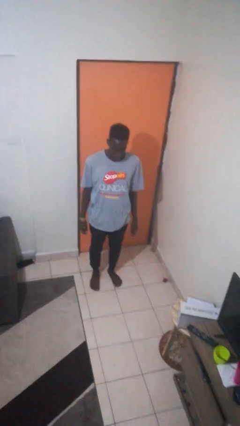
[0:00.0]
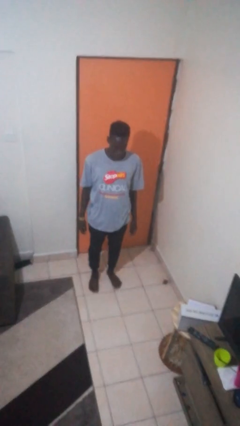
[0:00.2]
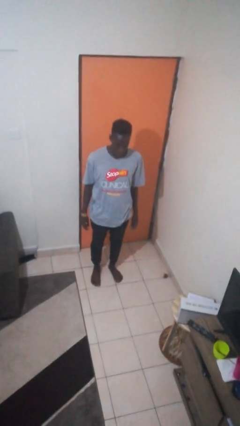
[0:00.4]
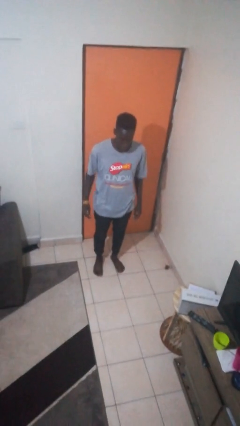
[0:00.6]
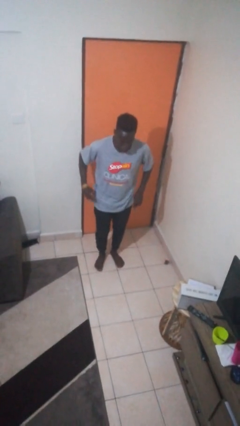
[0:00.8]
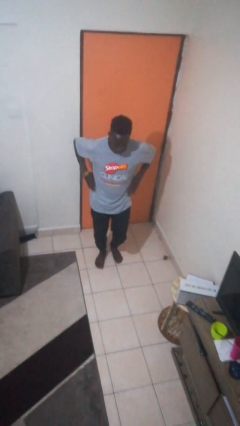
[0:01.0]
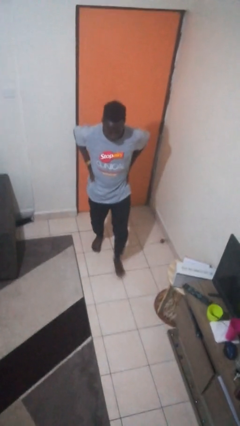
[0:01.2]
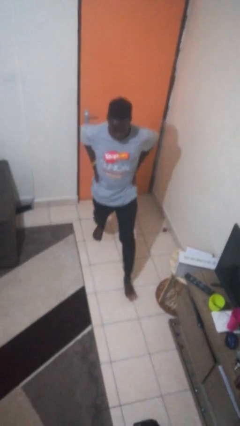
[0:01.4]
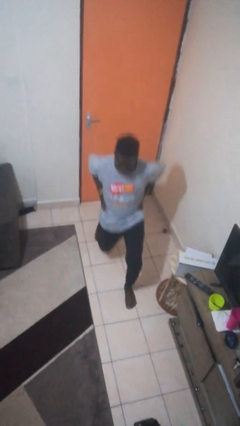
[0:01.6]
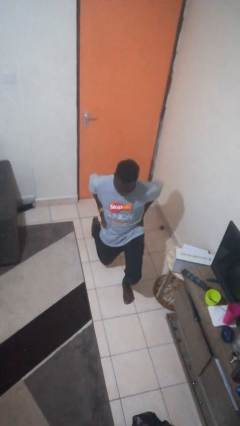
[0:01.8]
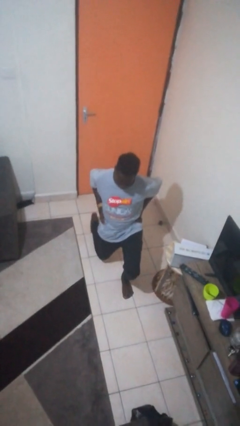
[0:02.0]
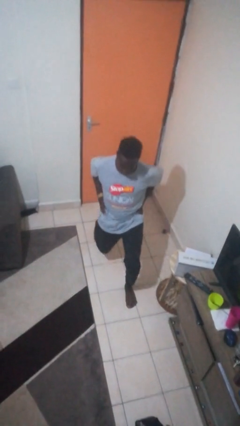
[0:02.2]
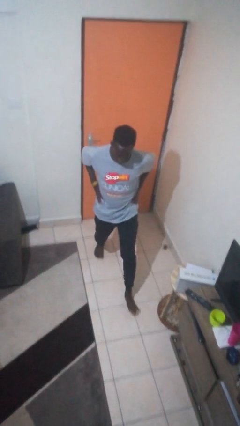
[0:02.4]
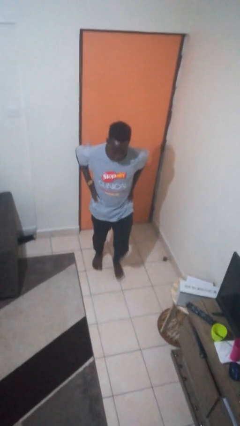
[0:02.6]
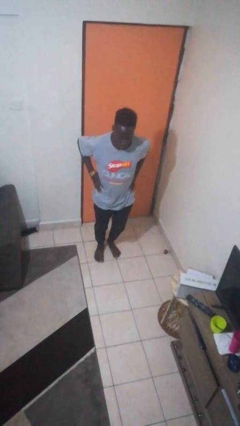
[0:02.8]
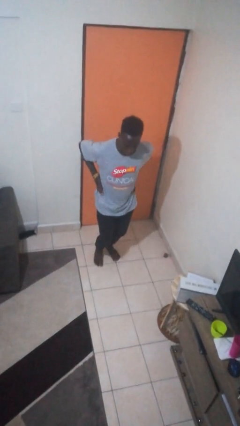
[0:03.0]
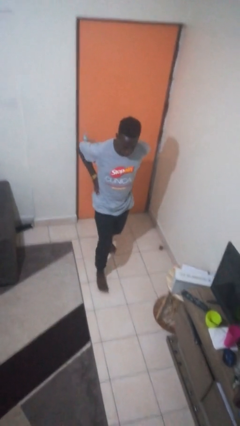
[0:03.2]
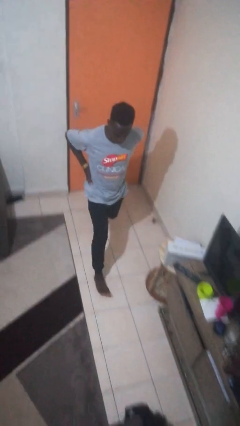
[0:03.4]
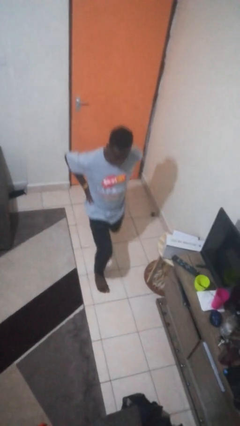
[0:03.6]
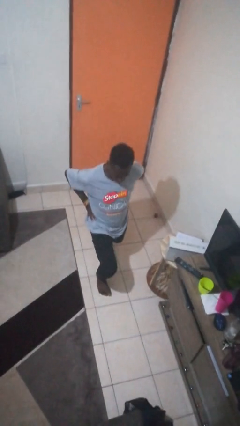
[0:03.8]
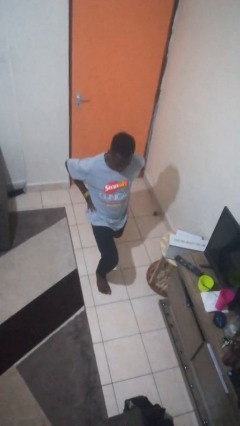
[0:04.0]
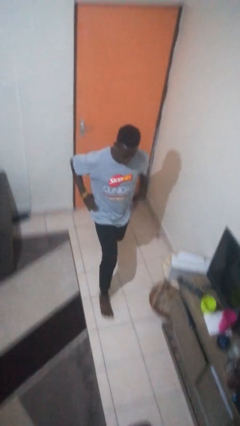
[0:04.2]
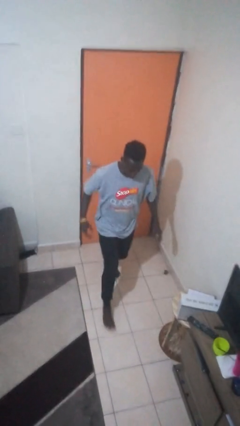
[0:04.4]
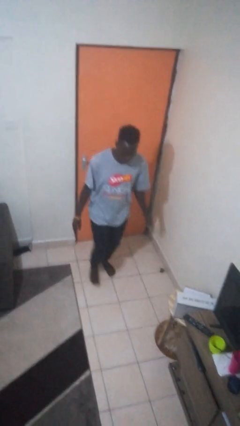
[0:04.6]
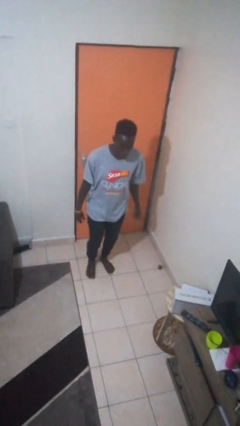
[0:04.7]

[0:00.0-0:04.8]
person exercises with lunges

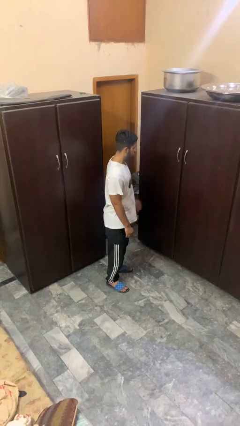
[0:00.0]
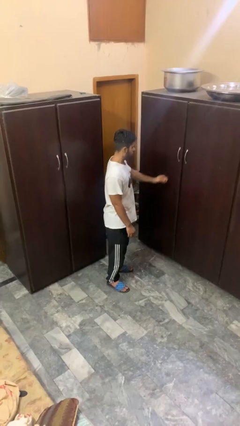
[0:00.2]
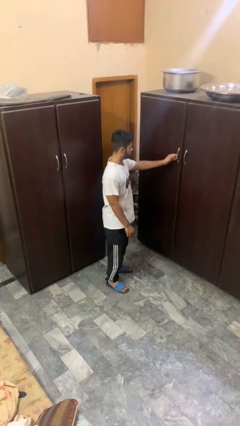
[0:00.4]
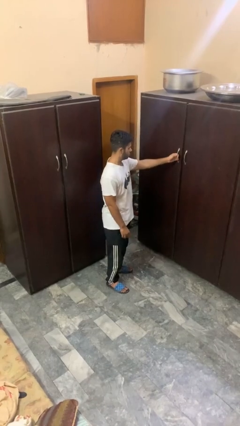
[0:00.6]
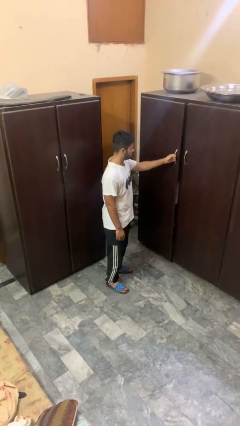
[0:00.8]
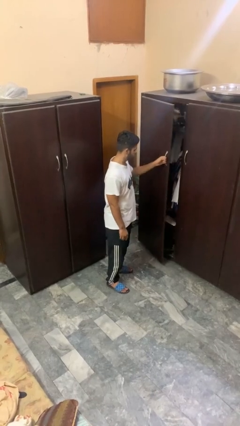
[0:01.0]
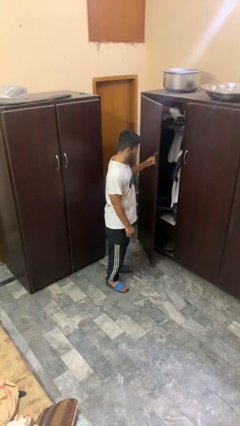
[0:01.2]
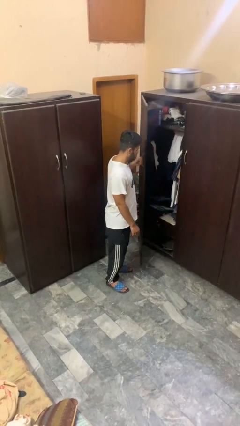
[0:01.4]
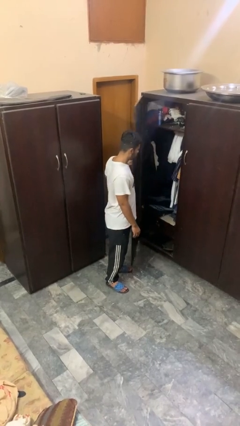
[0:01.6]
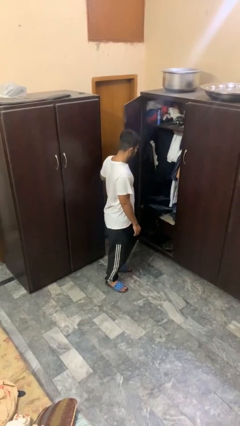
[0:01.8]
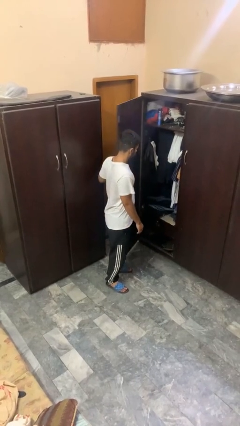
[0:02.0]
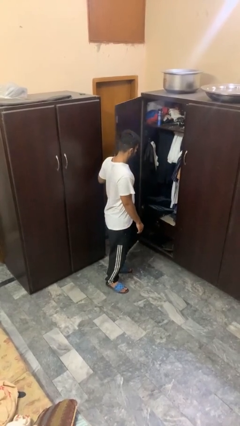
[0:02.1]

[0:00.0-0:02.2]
person opens closet door

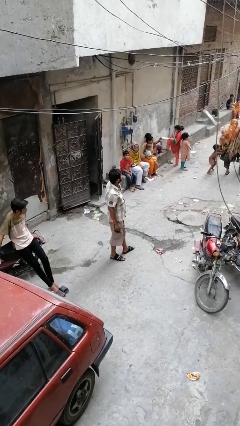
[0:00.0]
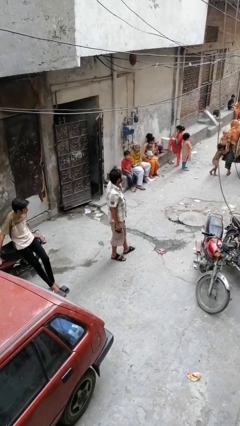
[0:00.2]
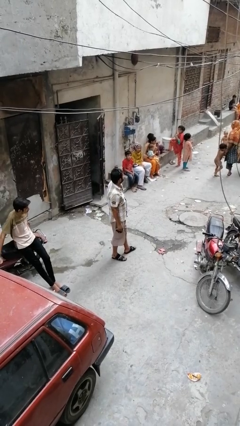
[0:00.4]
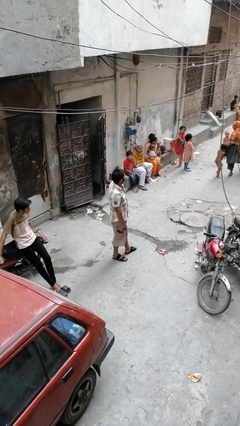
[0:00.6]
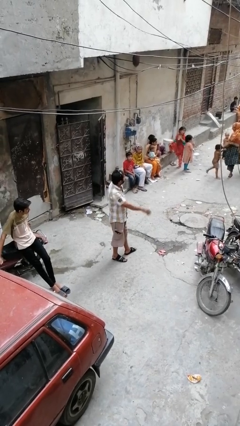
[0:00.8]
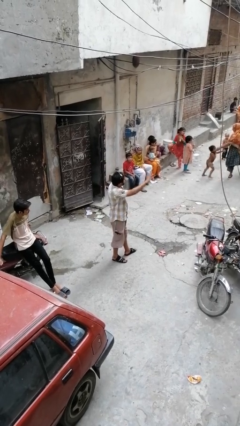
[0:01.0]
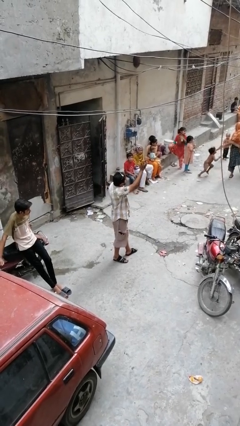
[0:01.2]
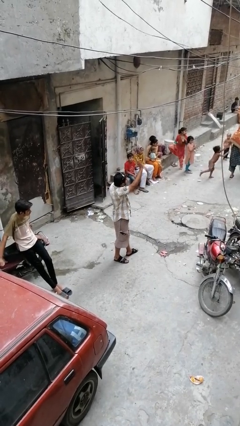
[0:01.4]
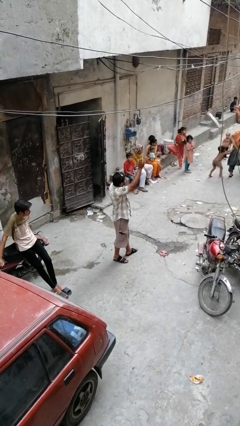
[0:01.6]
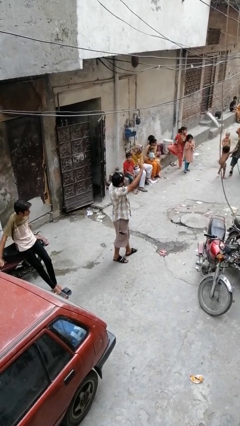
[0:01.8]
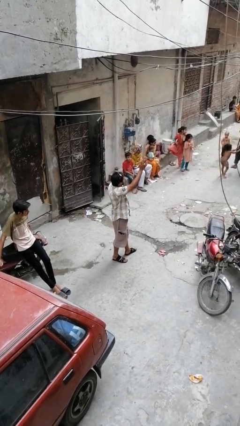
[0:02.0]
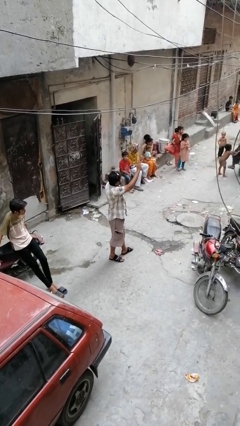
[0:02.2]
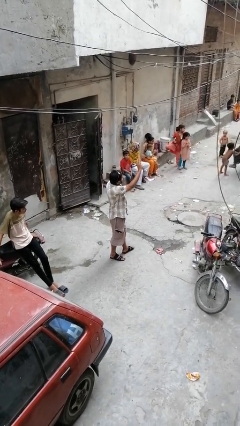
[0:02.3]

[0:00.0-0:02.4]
person waves at person

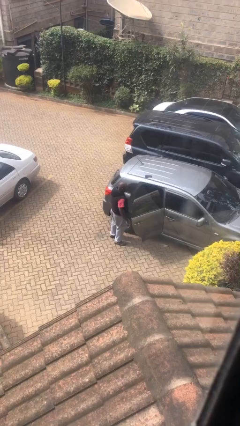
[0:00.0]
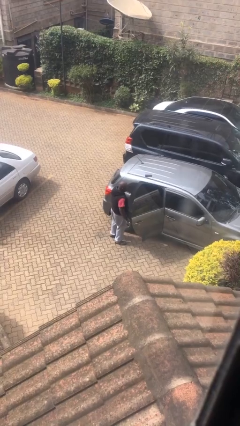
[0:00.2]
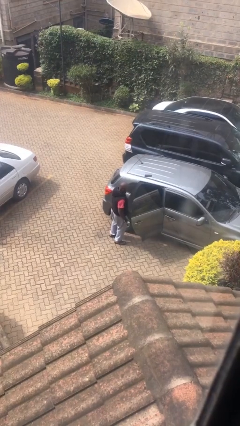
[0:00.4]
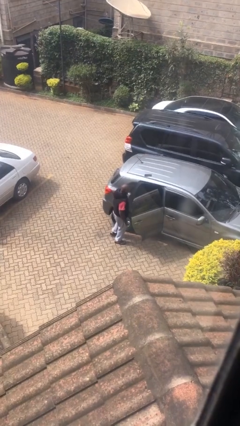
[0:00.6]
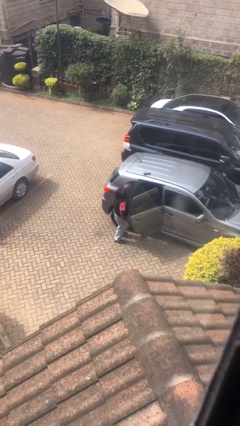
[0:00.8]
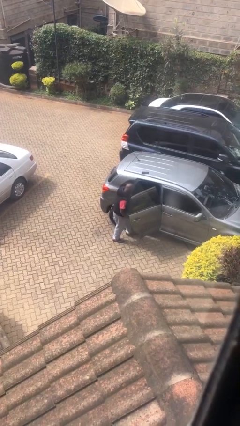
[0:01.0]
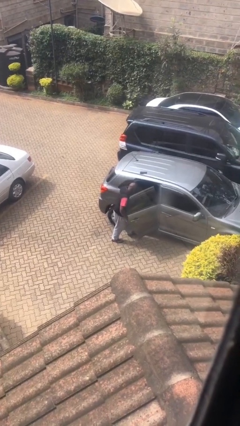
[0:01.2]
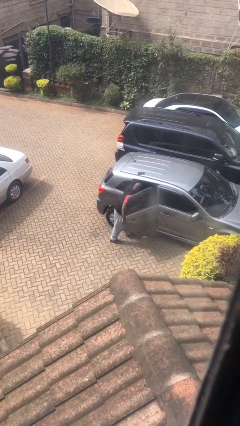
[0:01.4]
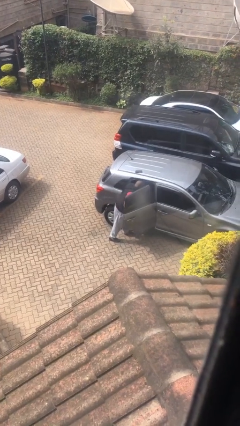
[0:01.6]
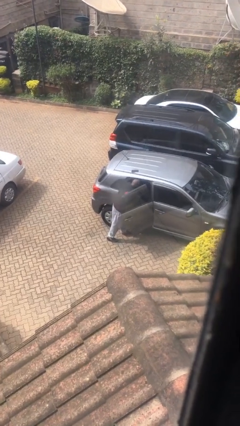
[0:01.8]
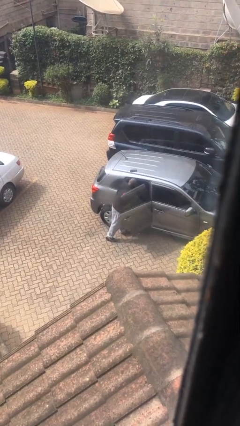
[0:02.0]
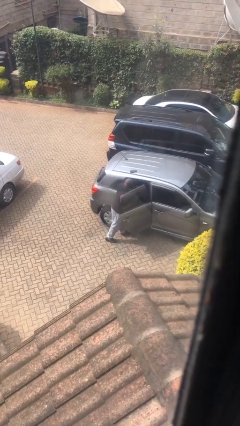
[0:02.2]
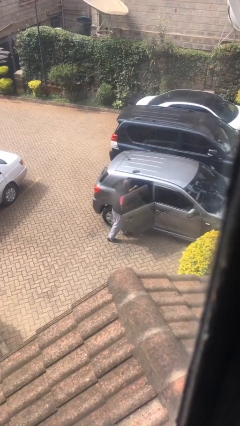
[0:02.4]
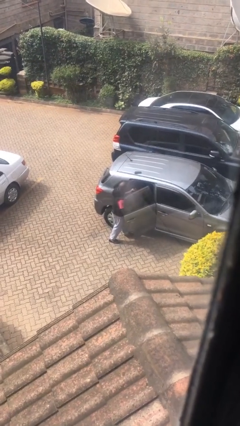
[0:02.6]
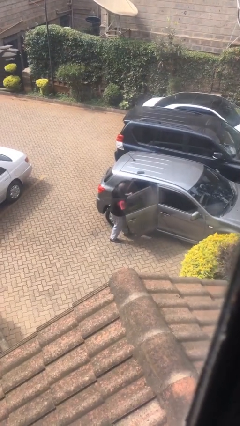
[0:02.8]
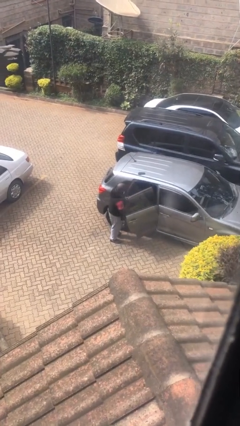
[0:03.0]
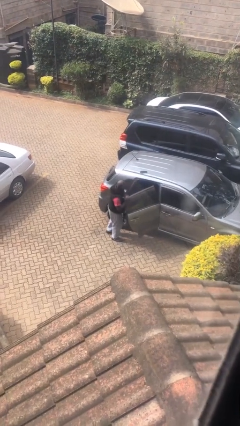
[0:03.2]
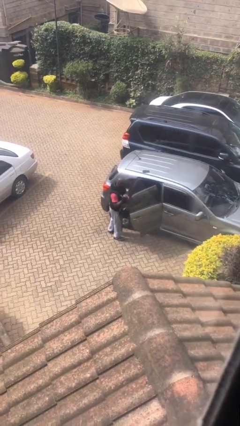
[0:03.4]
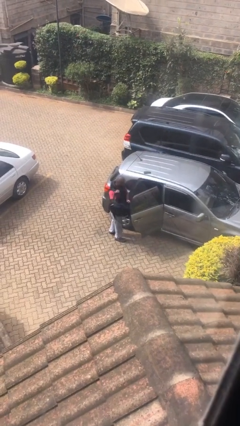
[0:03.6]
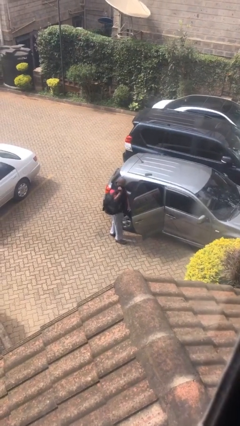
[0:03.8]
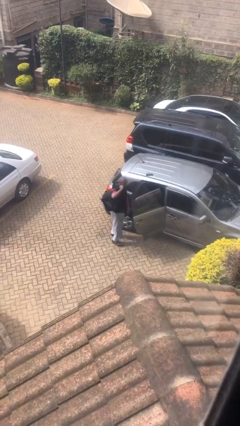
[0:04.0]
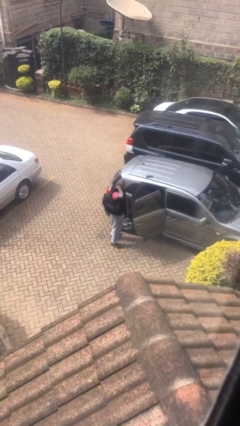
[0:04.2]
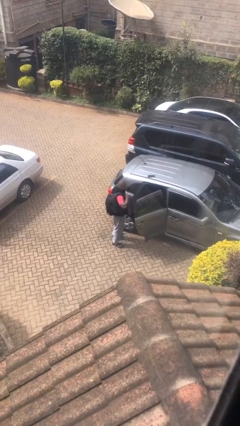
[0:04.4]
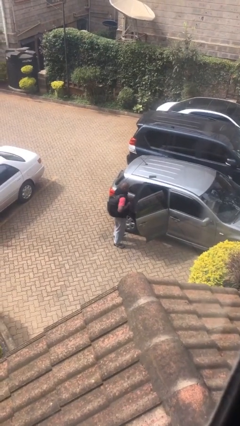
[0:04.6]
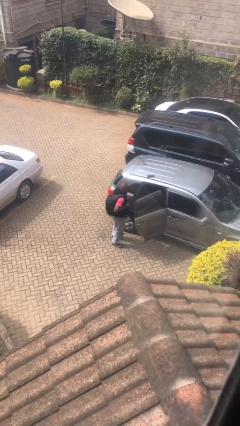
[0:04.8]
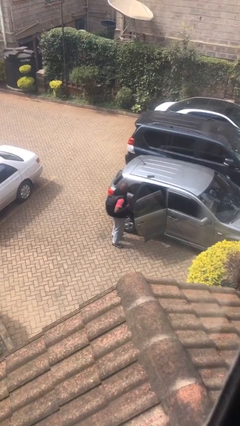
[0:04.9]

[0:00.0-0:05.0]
person unloads car

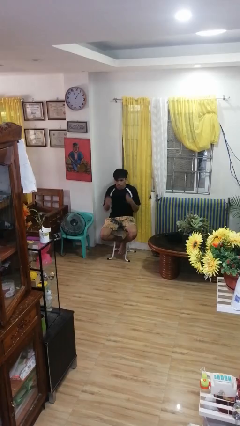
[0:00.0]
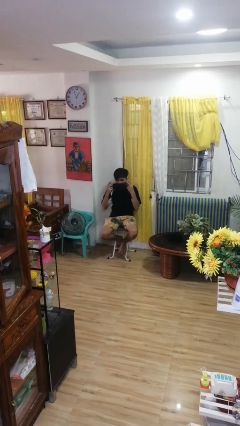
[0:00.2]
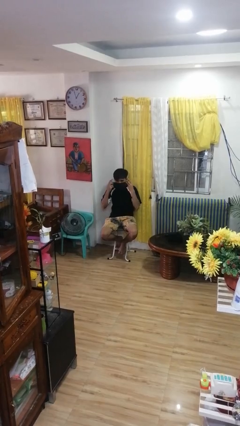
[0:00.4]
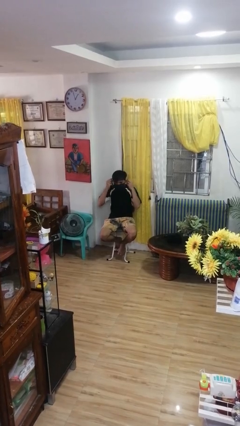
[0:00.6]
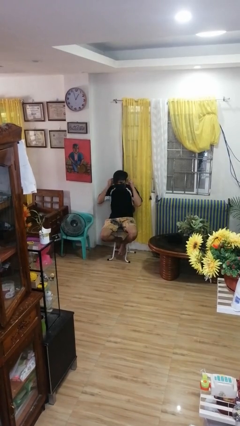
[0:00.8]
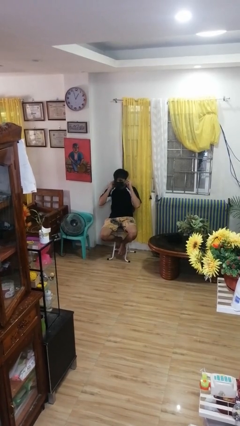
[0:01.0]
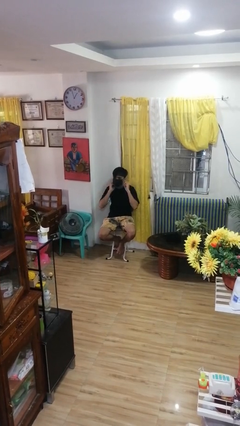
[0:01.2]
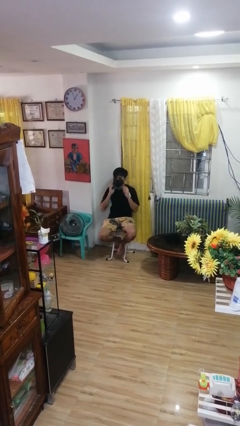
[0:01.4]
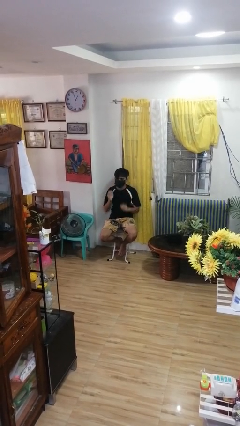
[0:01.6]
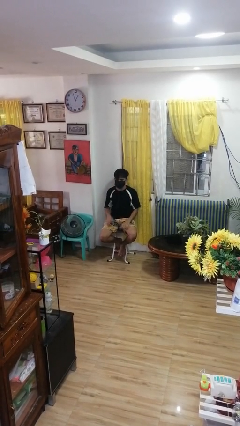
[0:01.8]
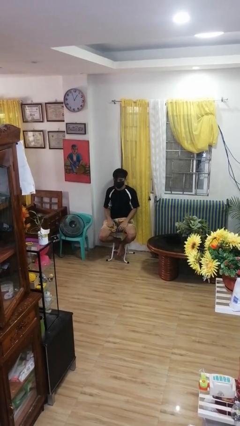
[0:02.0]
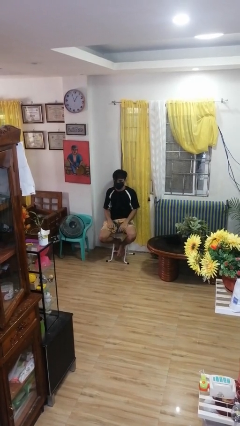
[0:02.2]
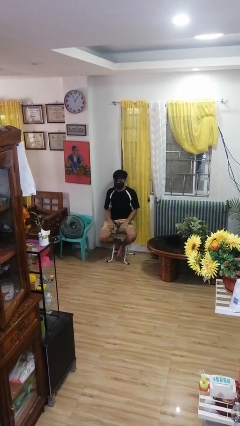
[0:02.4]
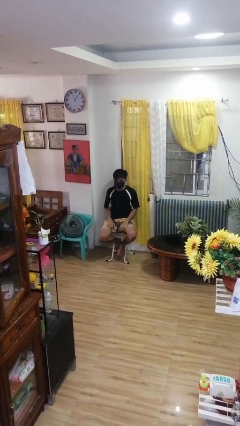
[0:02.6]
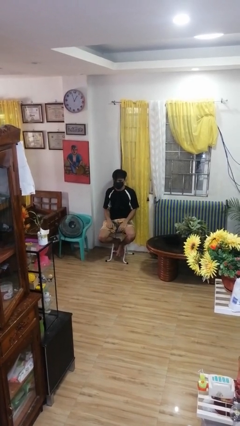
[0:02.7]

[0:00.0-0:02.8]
person puts on facemask

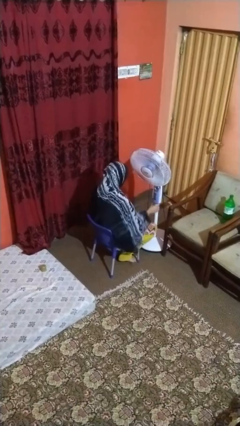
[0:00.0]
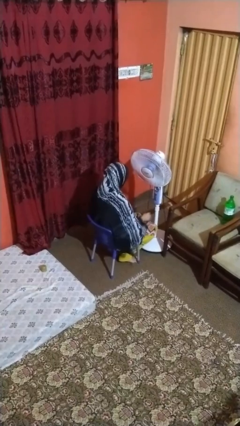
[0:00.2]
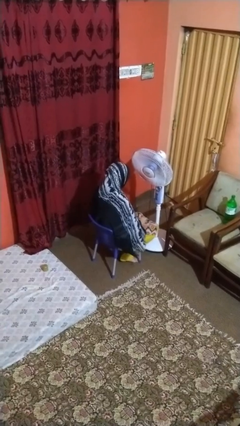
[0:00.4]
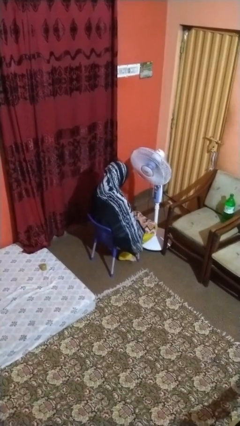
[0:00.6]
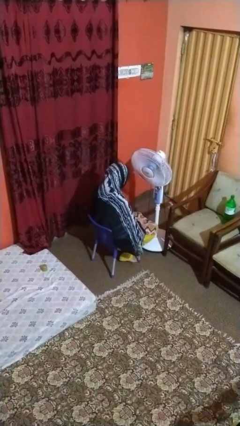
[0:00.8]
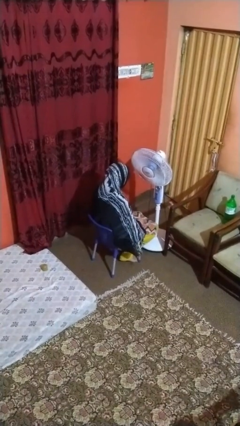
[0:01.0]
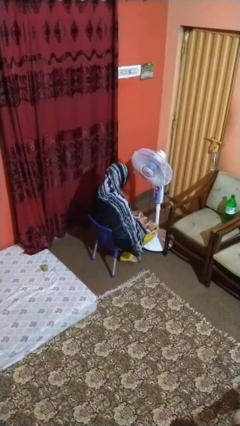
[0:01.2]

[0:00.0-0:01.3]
person turns off fan
